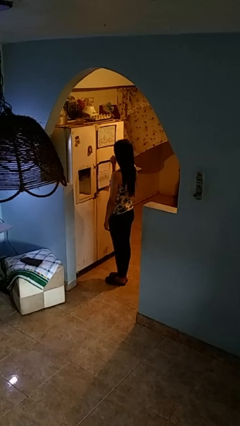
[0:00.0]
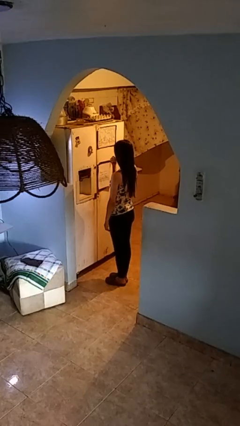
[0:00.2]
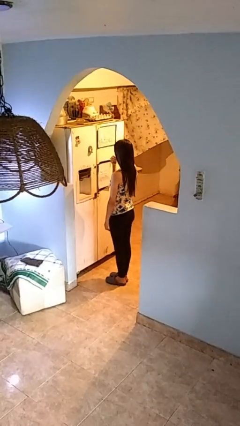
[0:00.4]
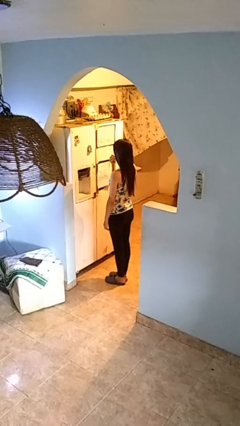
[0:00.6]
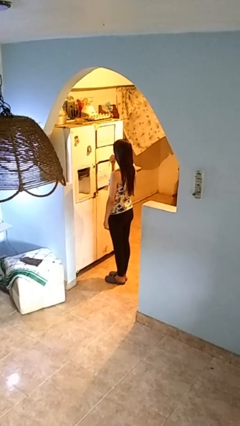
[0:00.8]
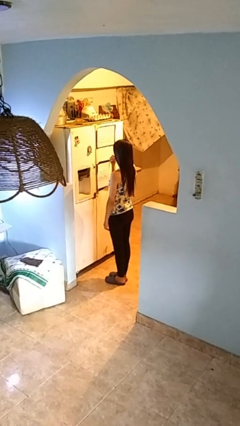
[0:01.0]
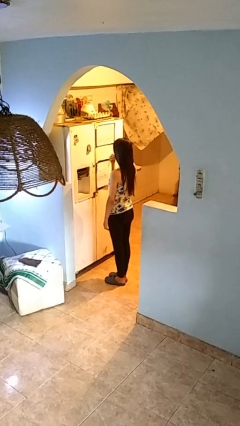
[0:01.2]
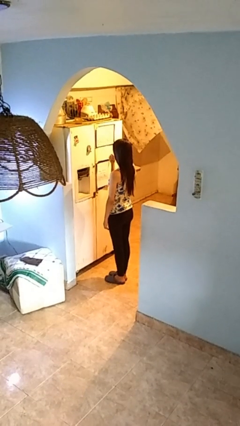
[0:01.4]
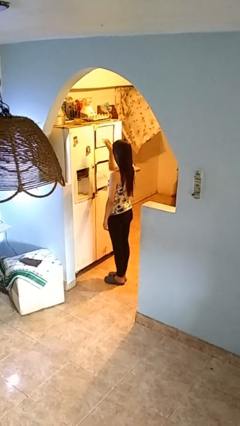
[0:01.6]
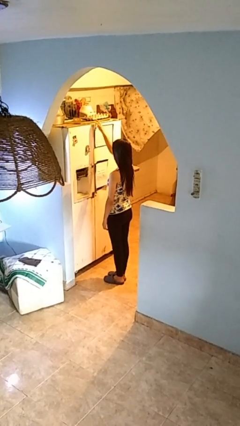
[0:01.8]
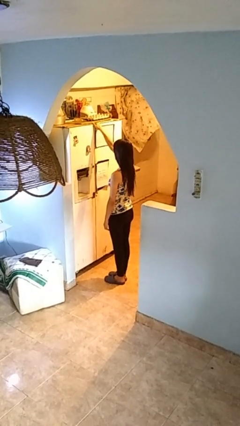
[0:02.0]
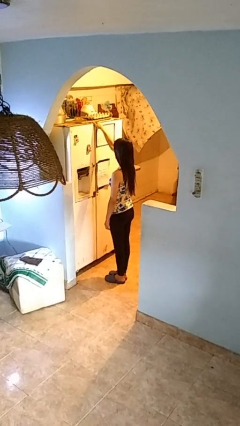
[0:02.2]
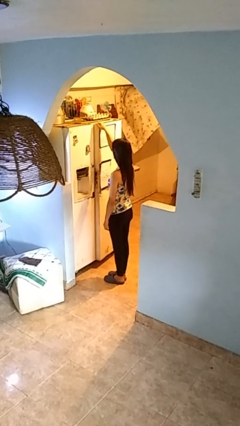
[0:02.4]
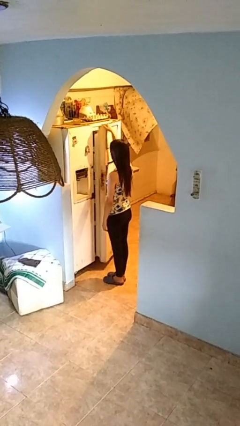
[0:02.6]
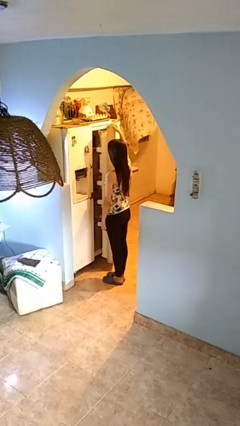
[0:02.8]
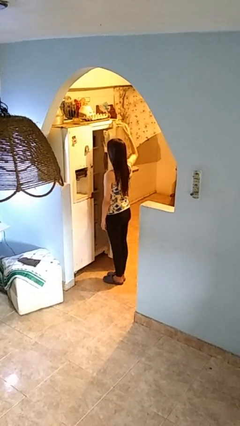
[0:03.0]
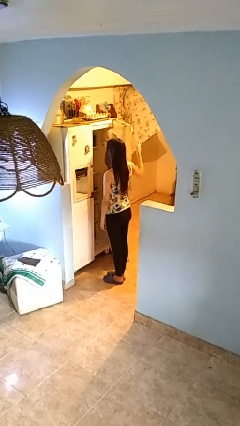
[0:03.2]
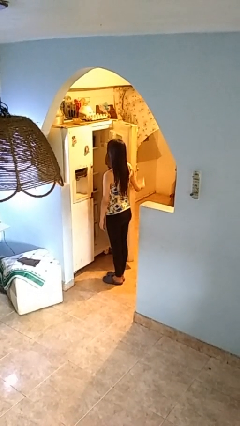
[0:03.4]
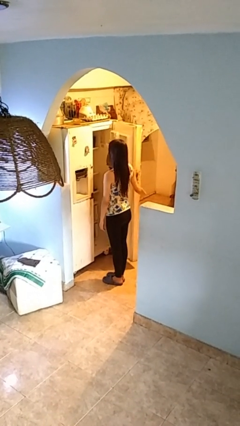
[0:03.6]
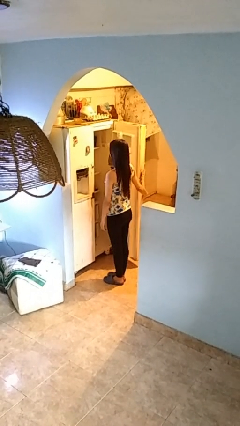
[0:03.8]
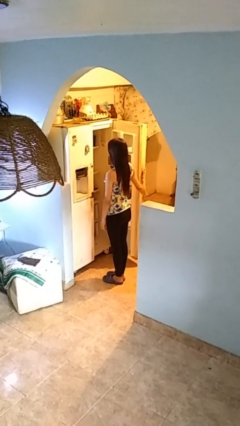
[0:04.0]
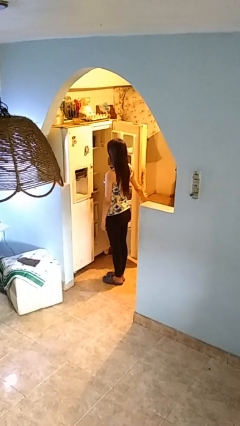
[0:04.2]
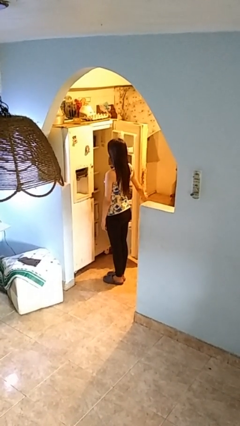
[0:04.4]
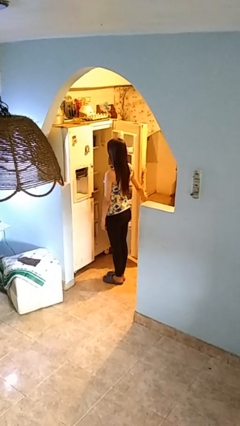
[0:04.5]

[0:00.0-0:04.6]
person opens refrigerator

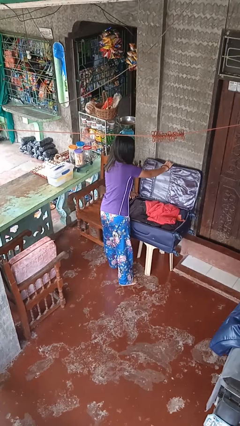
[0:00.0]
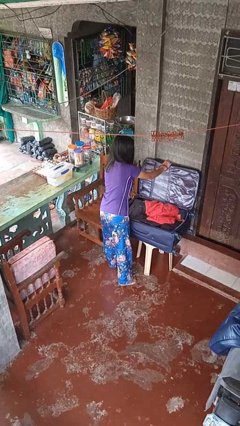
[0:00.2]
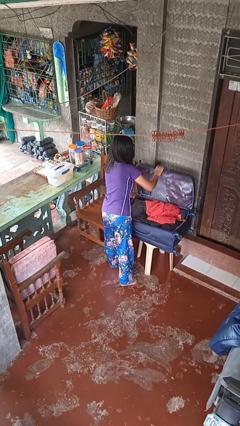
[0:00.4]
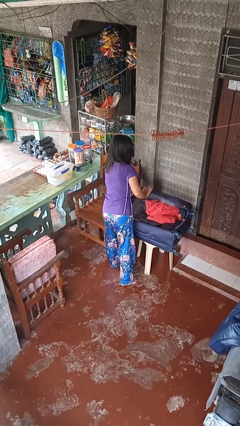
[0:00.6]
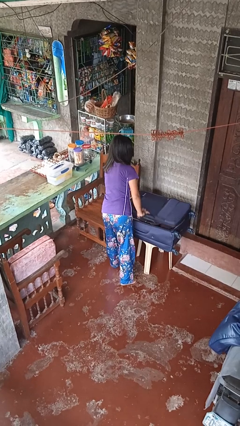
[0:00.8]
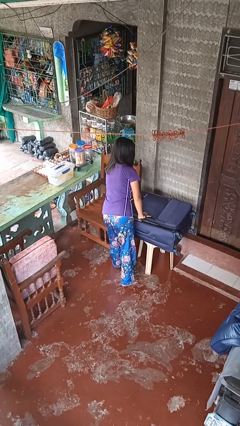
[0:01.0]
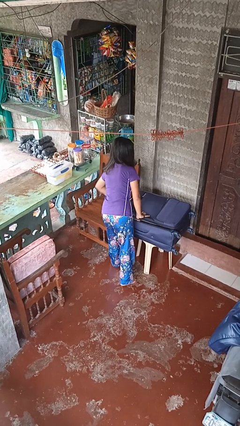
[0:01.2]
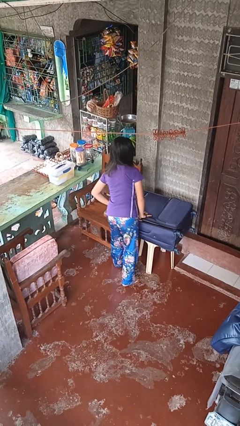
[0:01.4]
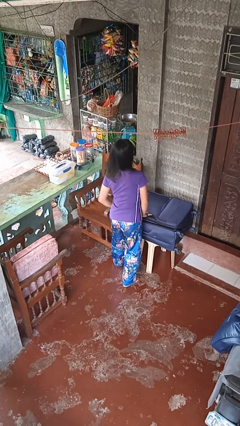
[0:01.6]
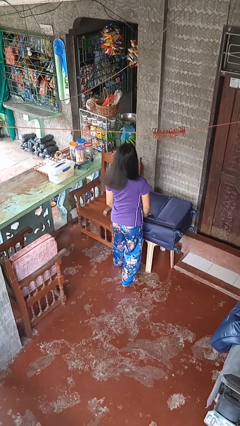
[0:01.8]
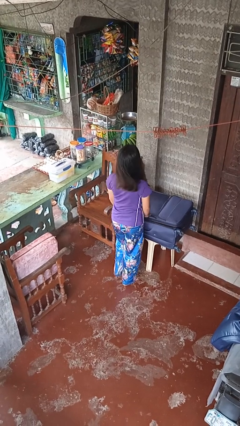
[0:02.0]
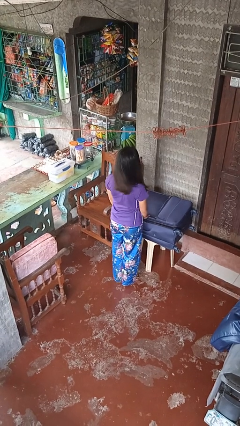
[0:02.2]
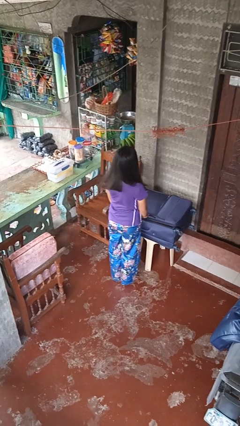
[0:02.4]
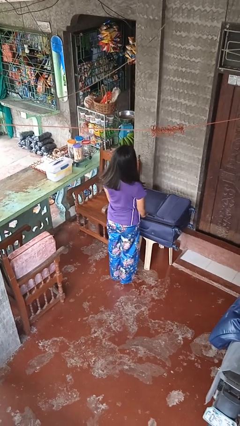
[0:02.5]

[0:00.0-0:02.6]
person closes suitcase

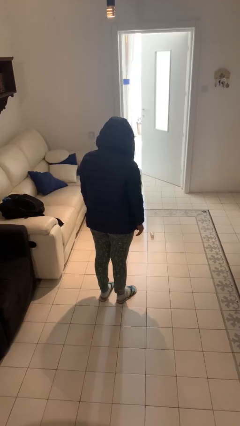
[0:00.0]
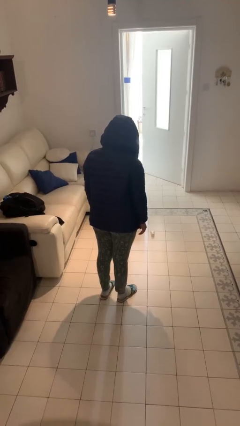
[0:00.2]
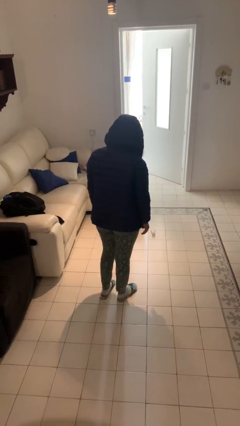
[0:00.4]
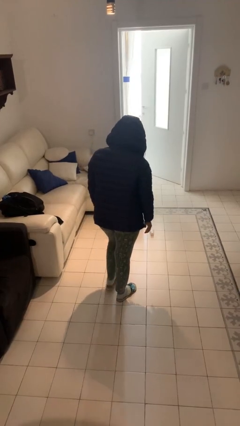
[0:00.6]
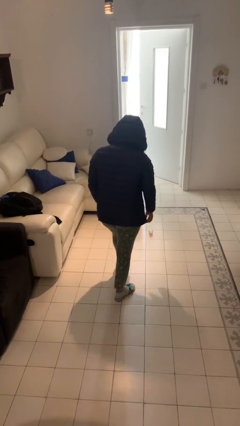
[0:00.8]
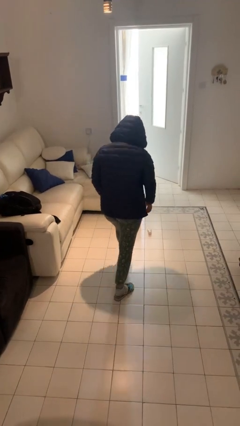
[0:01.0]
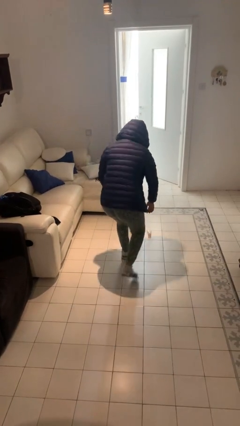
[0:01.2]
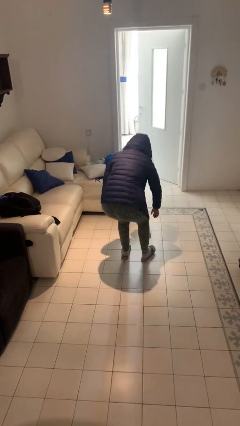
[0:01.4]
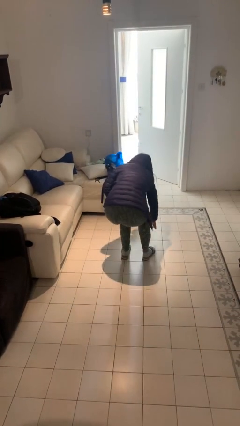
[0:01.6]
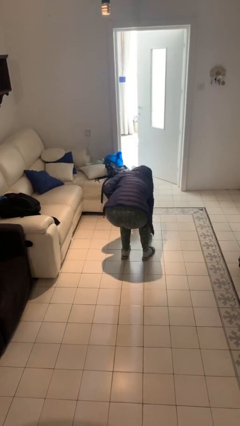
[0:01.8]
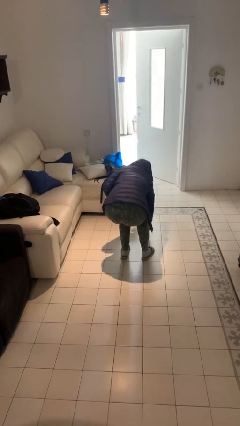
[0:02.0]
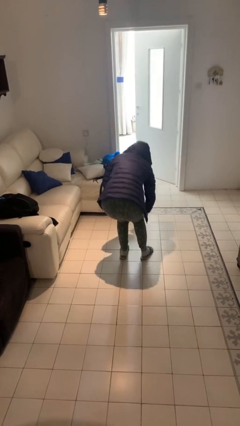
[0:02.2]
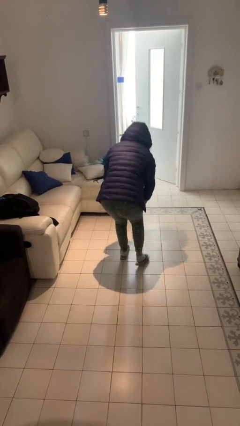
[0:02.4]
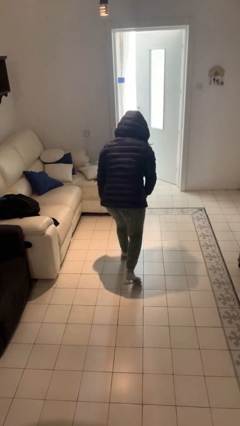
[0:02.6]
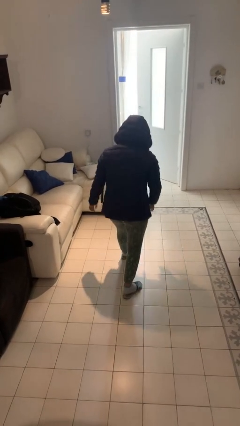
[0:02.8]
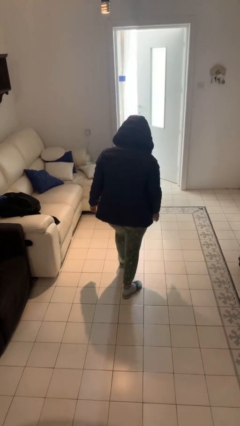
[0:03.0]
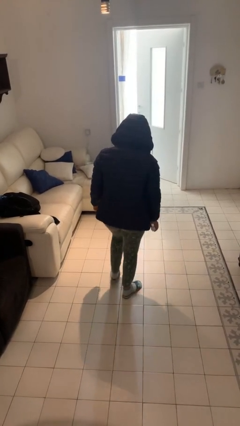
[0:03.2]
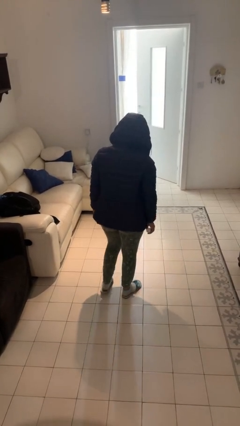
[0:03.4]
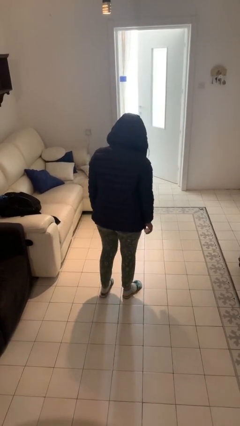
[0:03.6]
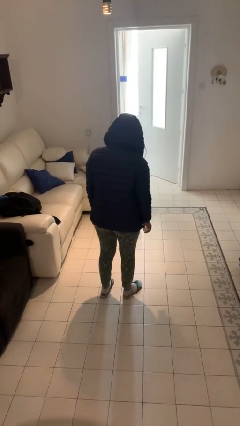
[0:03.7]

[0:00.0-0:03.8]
person picks up object from floor

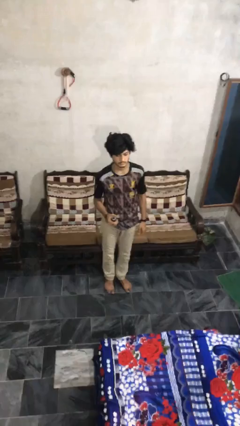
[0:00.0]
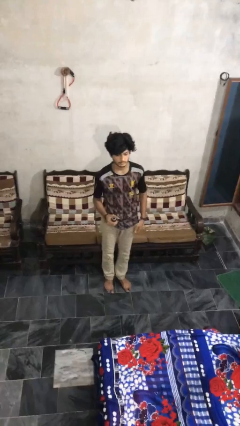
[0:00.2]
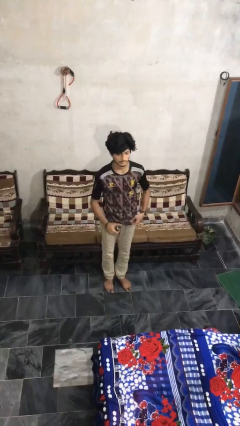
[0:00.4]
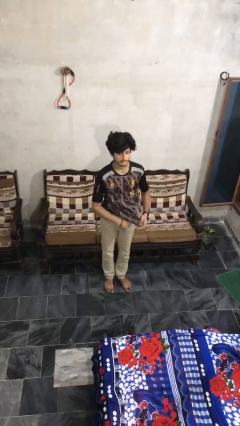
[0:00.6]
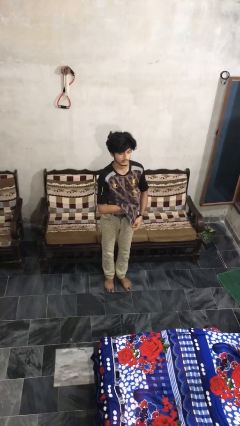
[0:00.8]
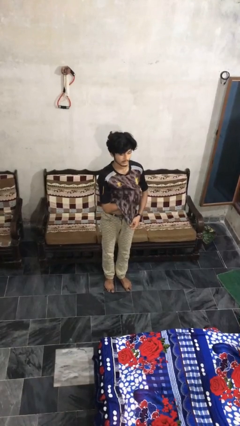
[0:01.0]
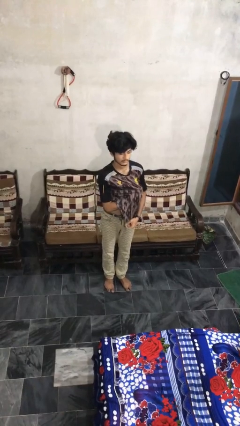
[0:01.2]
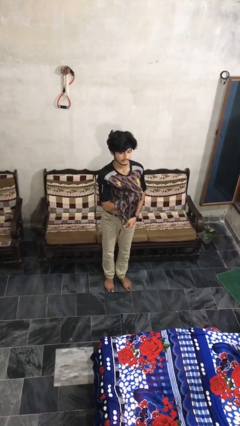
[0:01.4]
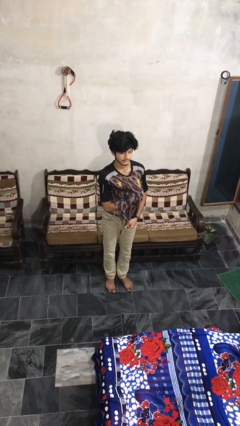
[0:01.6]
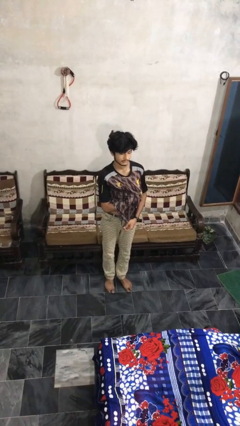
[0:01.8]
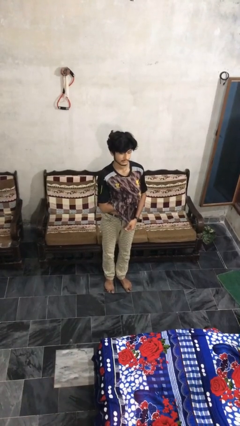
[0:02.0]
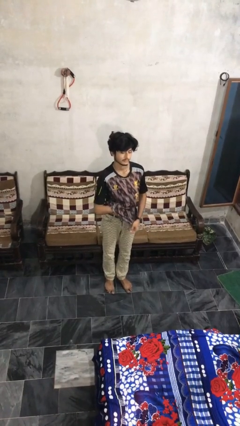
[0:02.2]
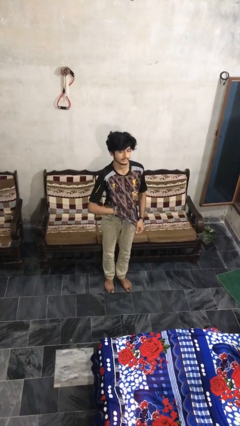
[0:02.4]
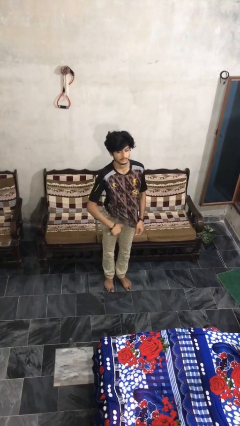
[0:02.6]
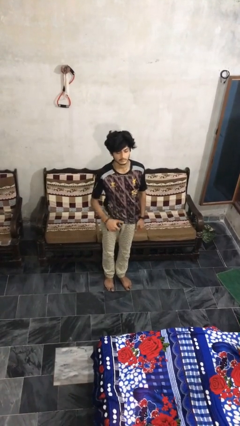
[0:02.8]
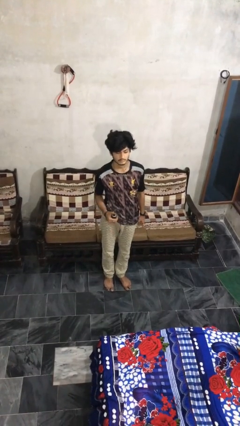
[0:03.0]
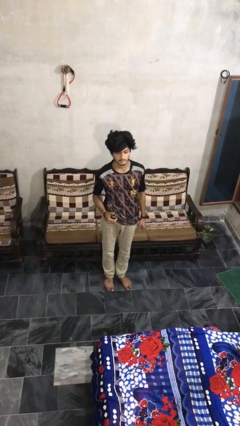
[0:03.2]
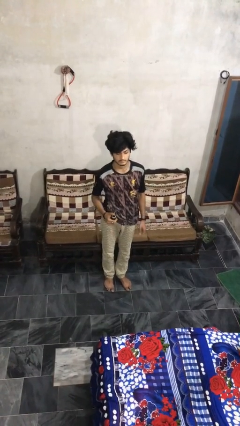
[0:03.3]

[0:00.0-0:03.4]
person applies deodorant

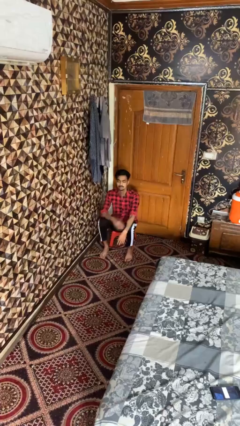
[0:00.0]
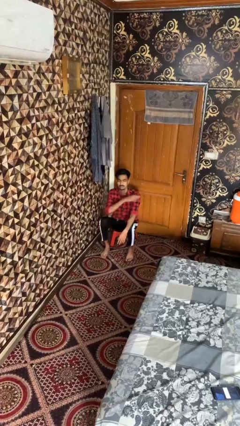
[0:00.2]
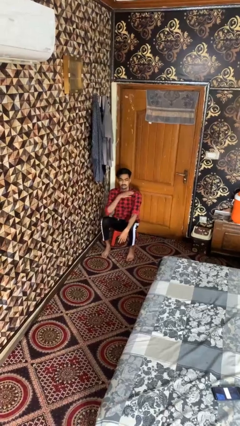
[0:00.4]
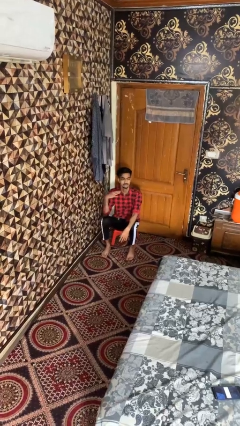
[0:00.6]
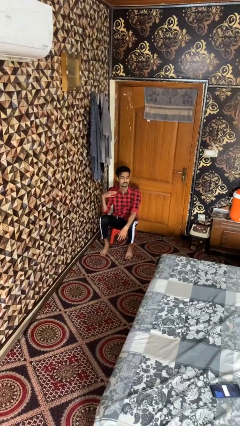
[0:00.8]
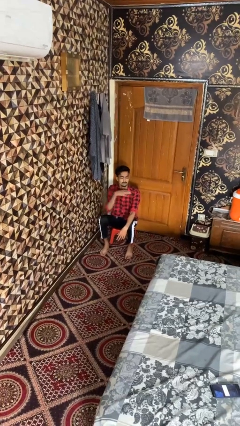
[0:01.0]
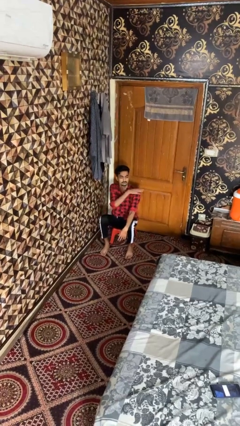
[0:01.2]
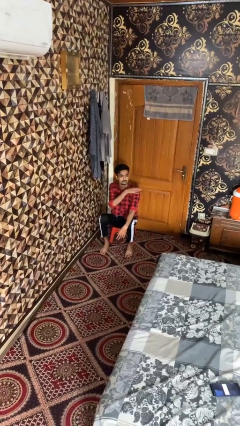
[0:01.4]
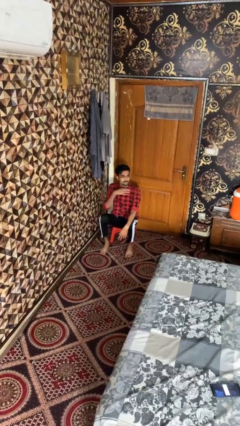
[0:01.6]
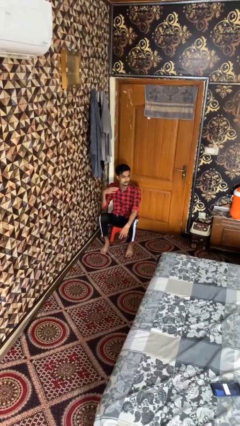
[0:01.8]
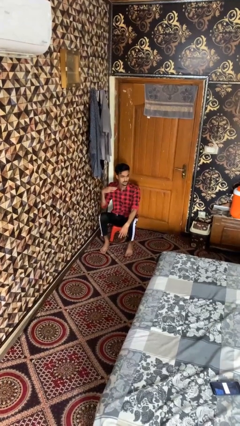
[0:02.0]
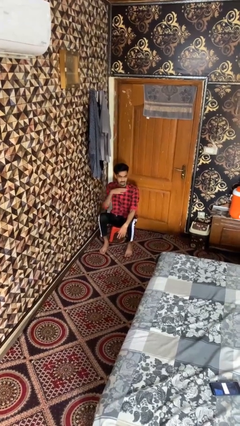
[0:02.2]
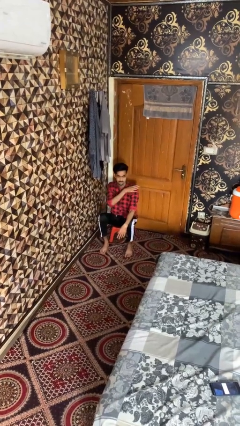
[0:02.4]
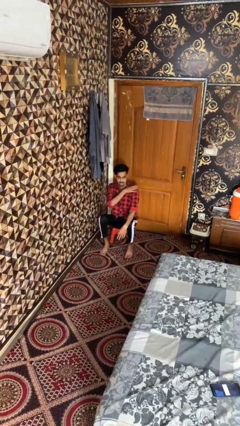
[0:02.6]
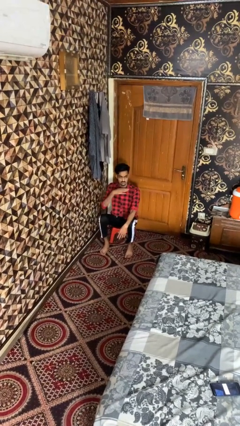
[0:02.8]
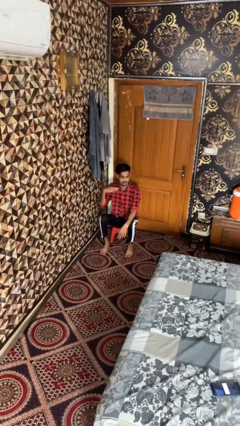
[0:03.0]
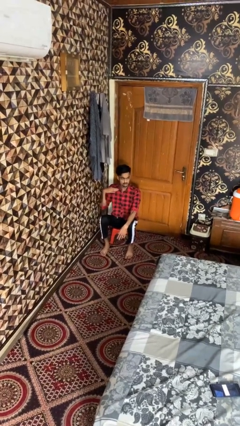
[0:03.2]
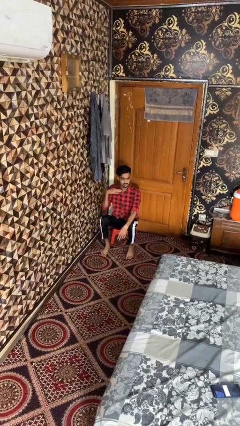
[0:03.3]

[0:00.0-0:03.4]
person gestures cut
